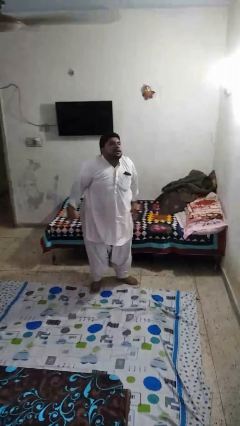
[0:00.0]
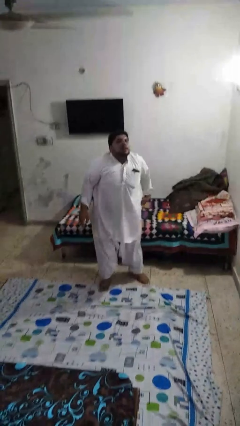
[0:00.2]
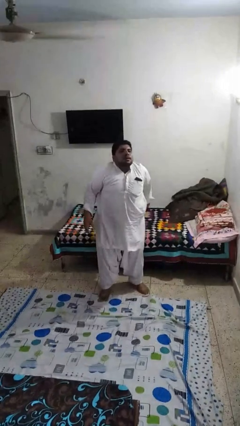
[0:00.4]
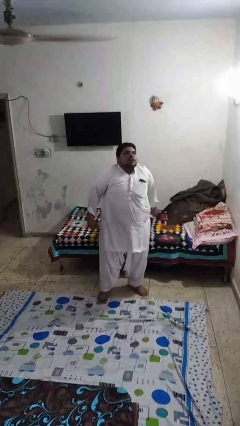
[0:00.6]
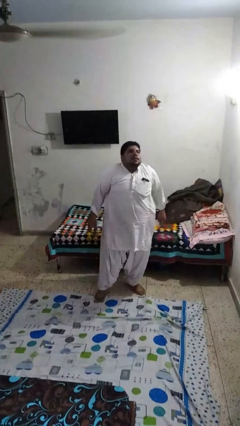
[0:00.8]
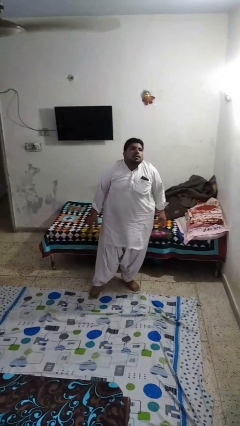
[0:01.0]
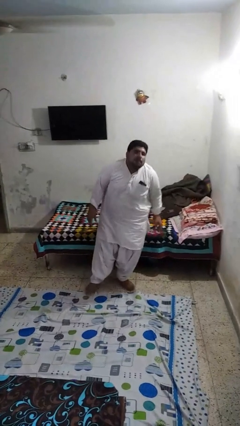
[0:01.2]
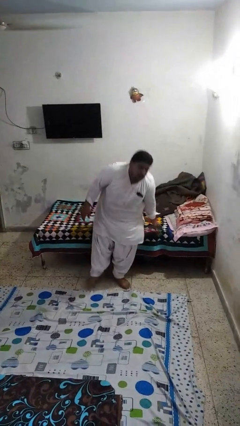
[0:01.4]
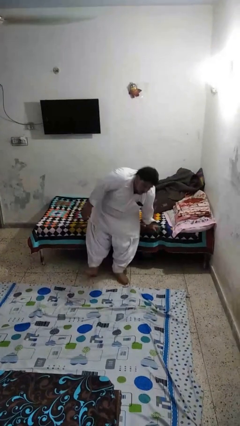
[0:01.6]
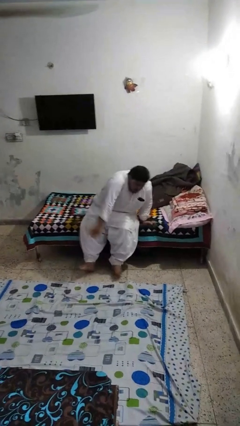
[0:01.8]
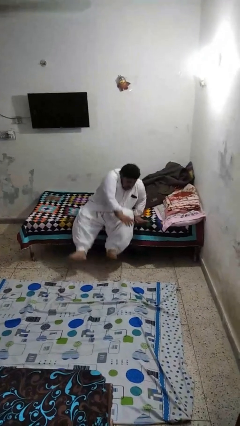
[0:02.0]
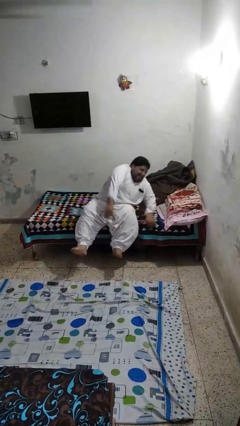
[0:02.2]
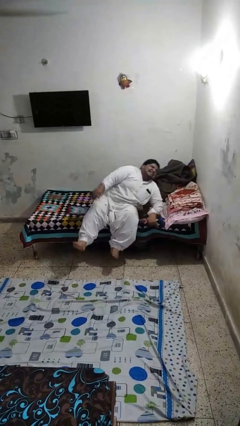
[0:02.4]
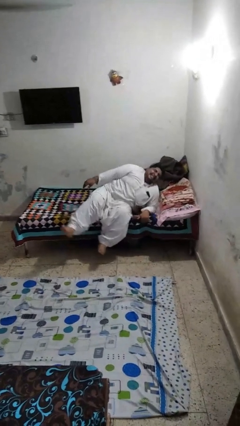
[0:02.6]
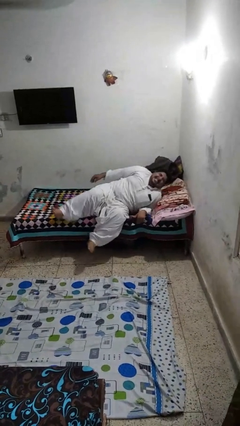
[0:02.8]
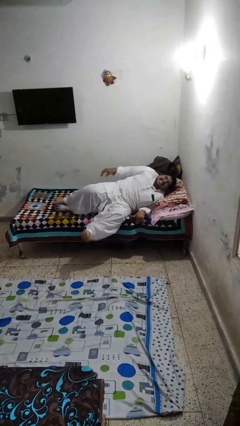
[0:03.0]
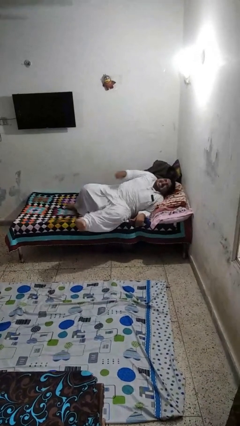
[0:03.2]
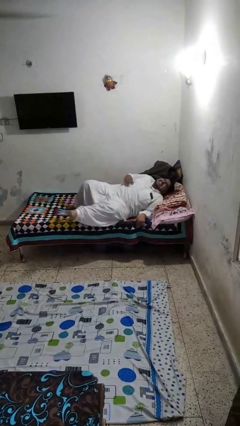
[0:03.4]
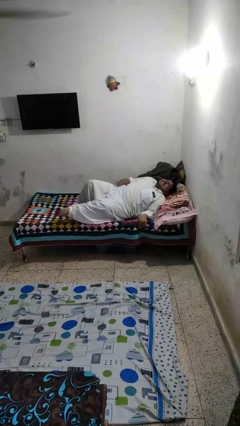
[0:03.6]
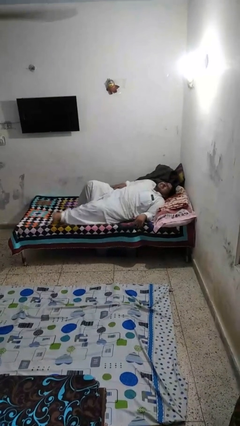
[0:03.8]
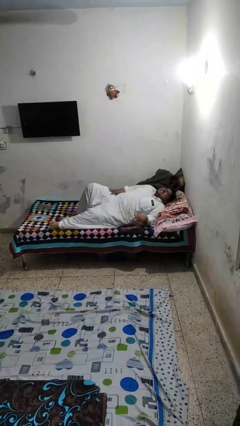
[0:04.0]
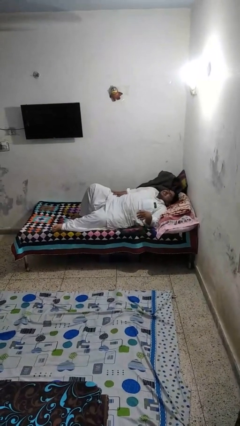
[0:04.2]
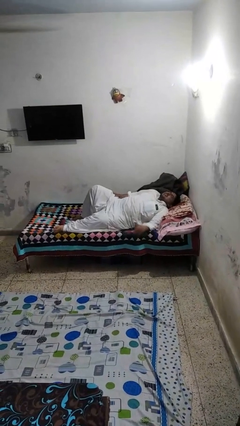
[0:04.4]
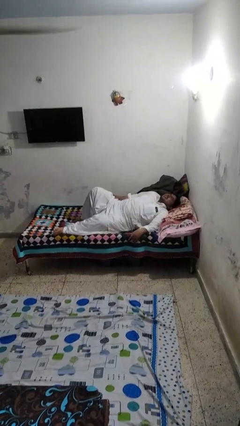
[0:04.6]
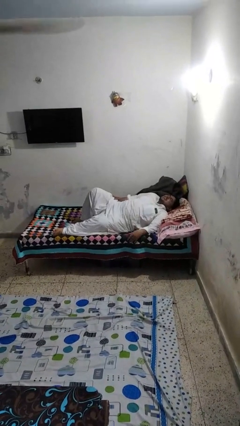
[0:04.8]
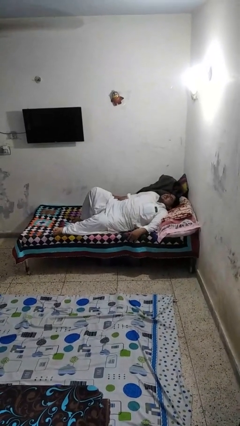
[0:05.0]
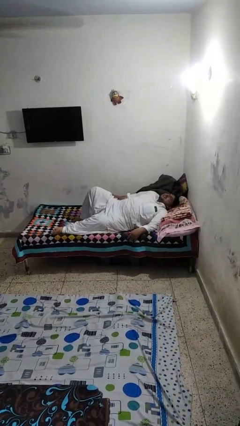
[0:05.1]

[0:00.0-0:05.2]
person lies down on bed

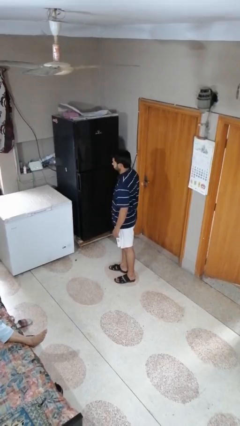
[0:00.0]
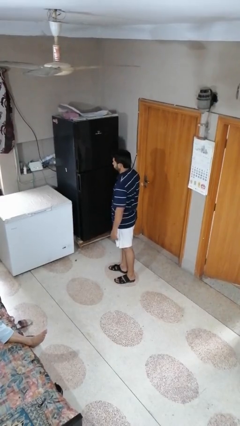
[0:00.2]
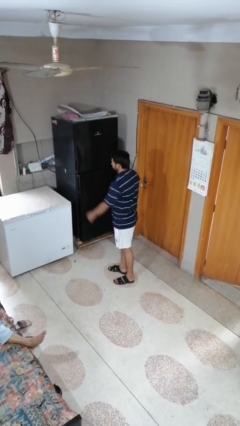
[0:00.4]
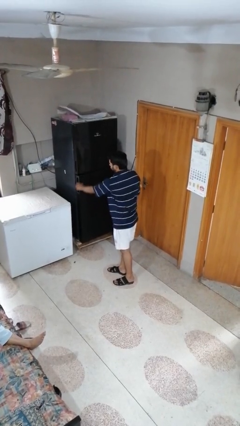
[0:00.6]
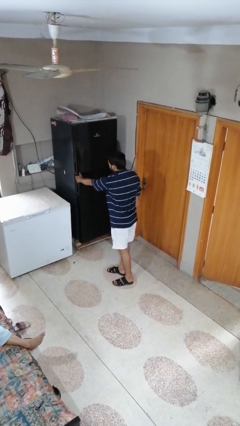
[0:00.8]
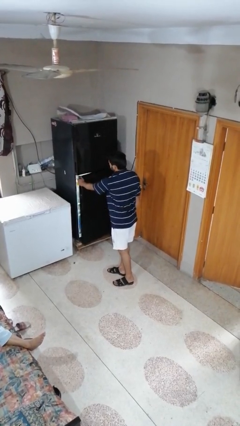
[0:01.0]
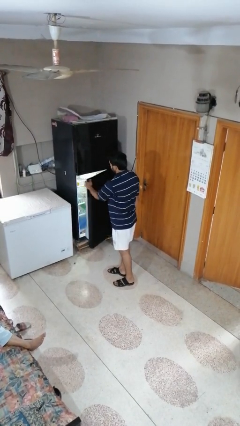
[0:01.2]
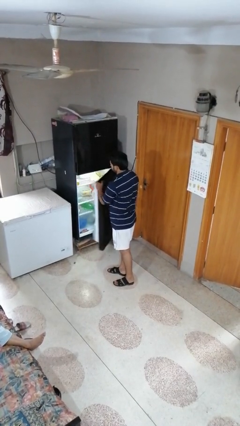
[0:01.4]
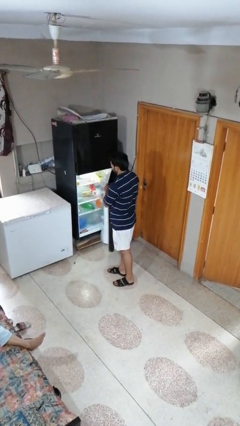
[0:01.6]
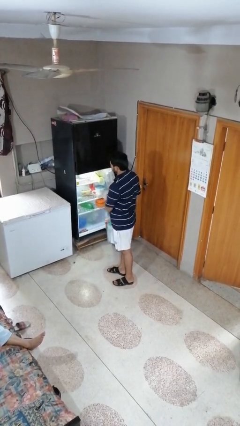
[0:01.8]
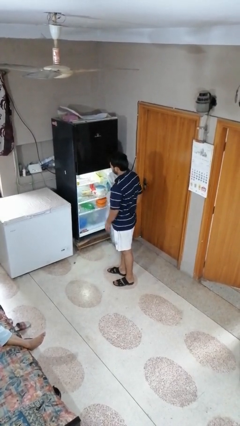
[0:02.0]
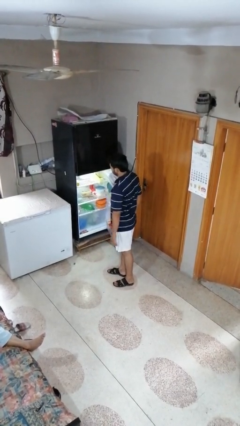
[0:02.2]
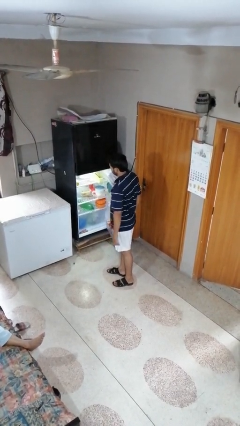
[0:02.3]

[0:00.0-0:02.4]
person opens refrigerator

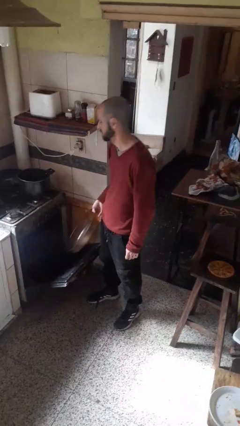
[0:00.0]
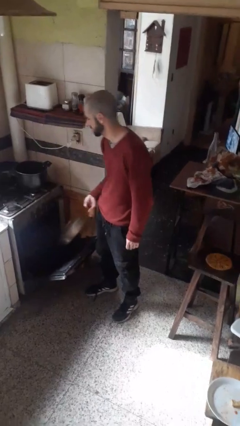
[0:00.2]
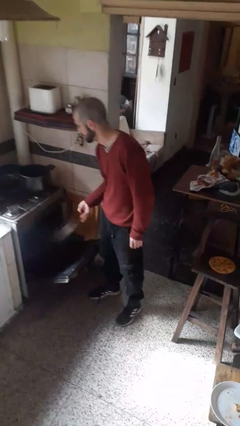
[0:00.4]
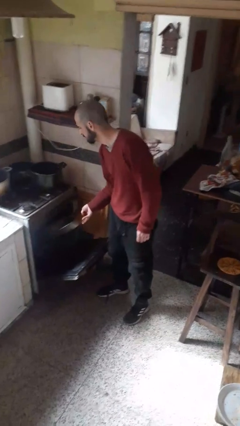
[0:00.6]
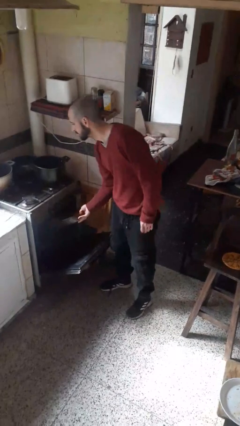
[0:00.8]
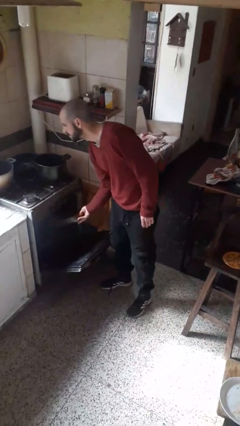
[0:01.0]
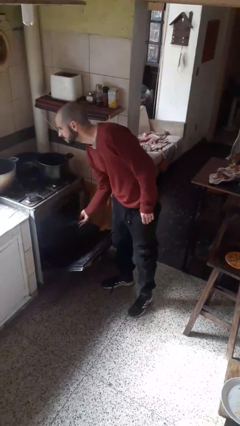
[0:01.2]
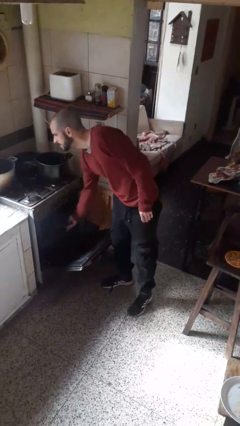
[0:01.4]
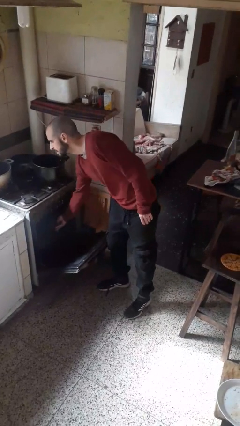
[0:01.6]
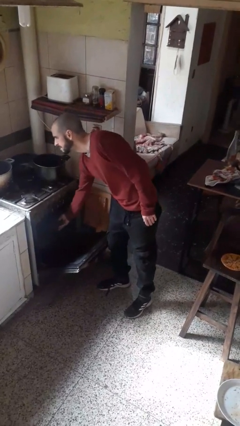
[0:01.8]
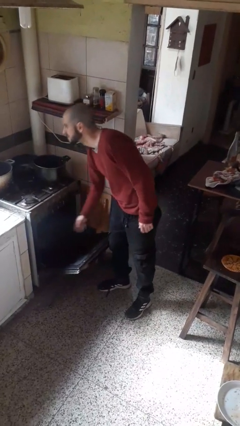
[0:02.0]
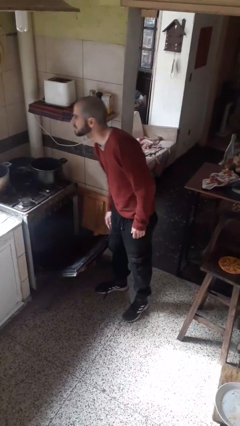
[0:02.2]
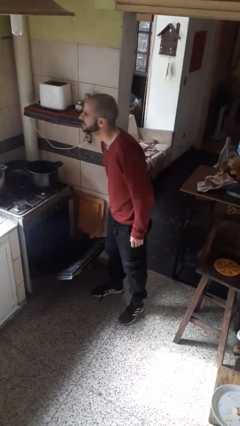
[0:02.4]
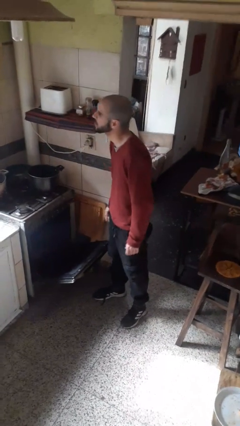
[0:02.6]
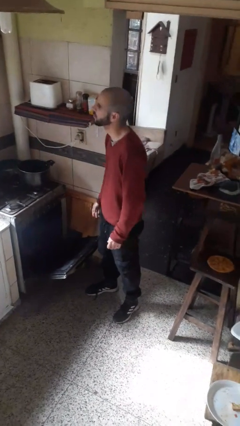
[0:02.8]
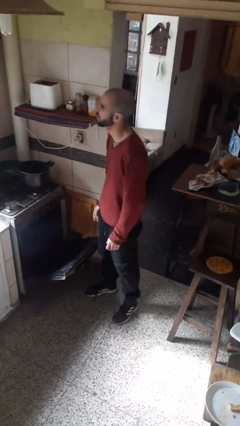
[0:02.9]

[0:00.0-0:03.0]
person puts object into oven

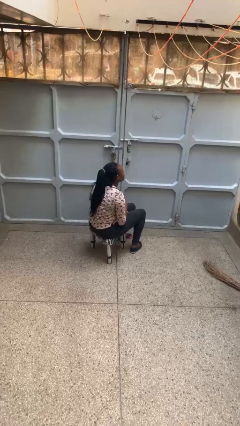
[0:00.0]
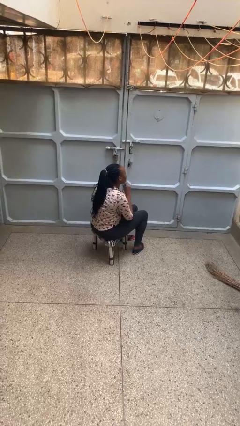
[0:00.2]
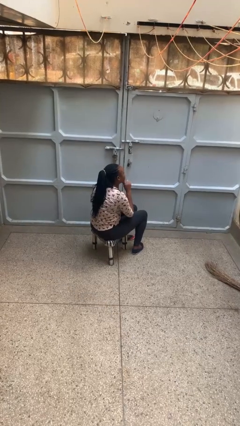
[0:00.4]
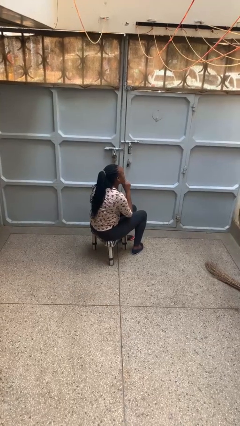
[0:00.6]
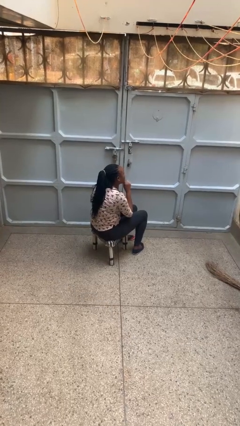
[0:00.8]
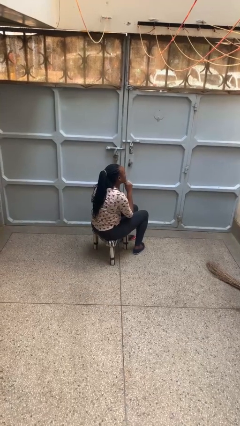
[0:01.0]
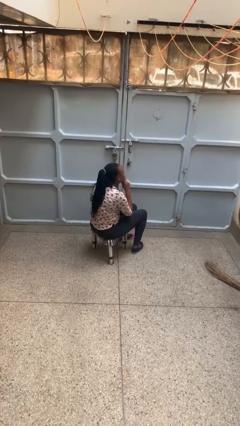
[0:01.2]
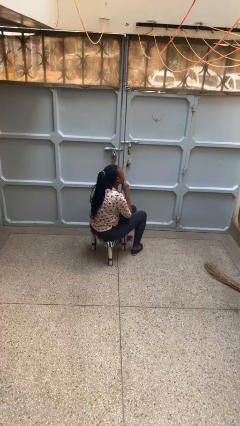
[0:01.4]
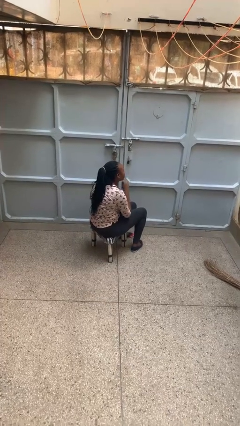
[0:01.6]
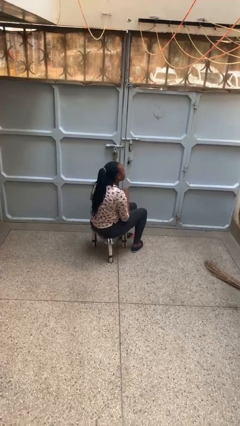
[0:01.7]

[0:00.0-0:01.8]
person strokes chin

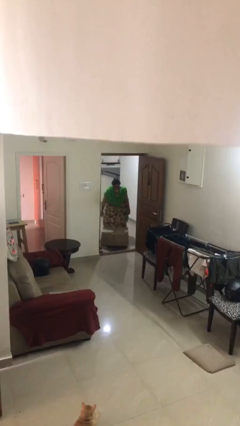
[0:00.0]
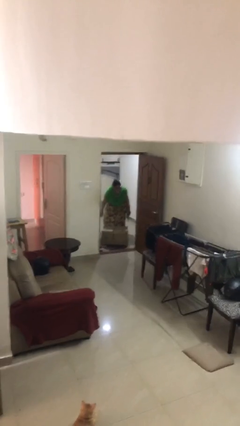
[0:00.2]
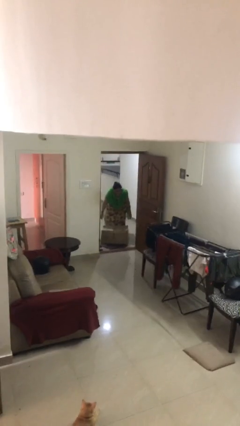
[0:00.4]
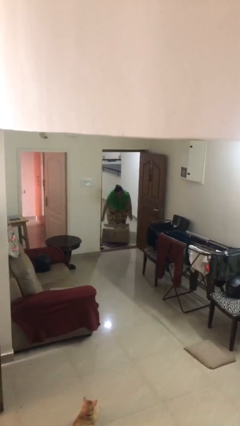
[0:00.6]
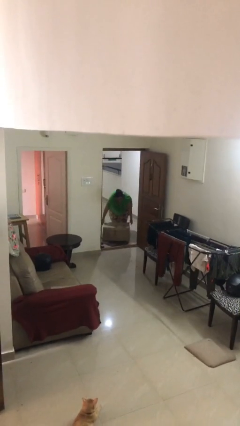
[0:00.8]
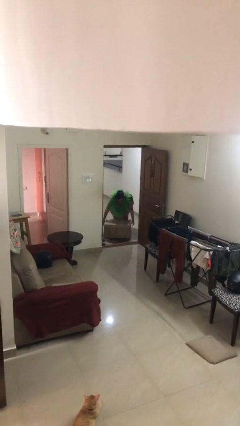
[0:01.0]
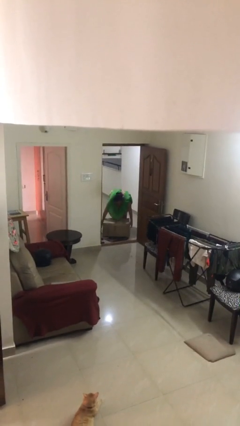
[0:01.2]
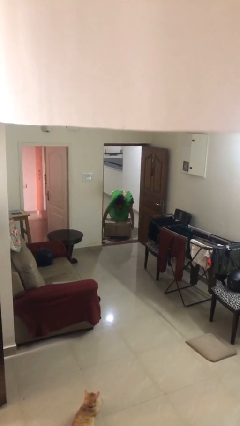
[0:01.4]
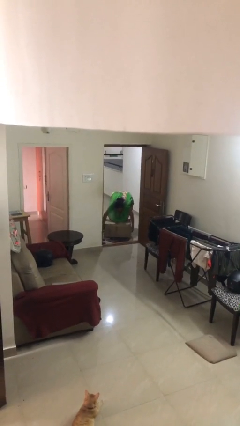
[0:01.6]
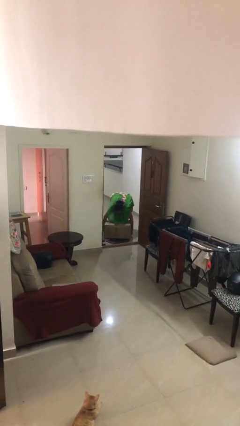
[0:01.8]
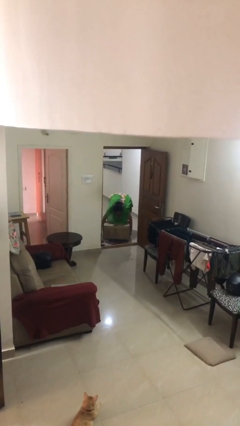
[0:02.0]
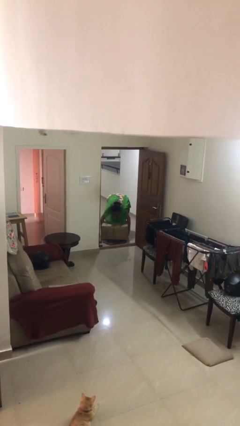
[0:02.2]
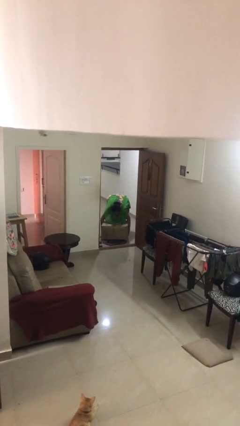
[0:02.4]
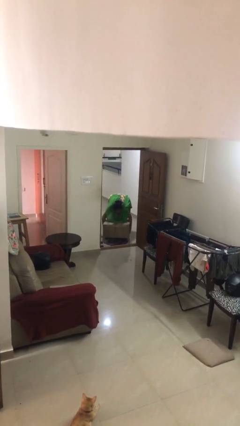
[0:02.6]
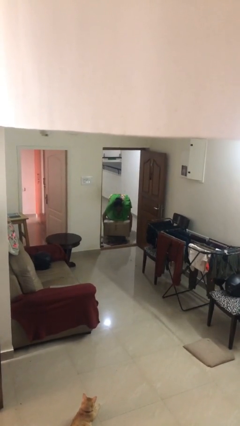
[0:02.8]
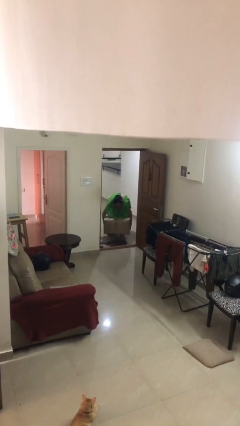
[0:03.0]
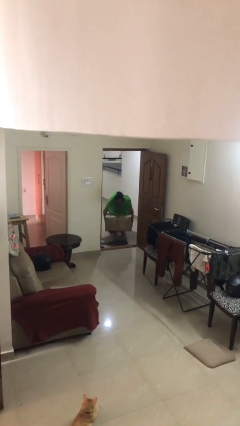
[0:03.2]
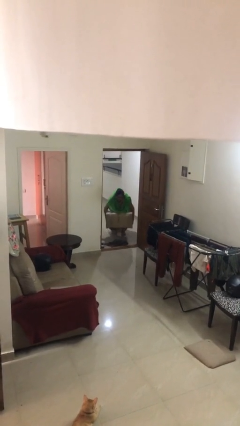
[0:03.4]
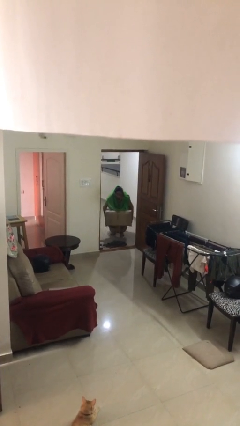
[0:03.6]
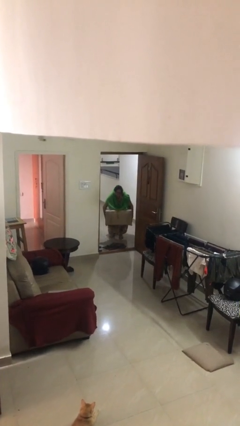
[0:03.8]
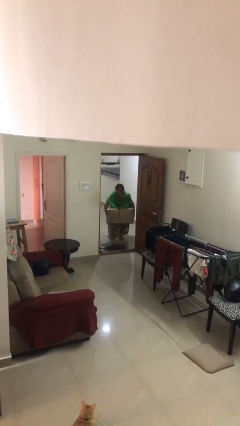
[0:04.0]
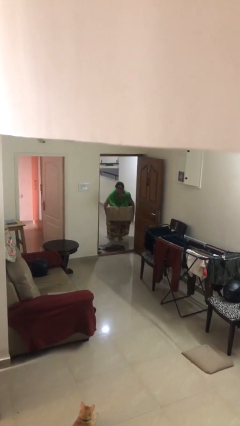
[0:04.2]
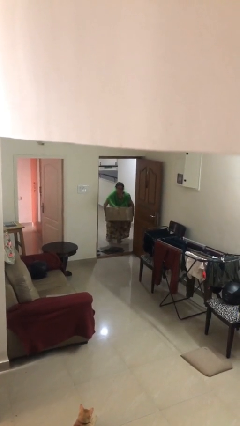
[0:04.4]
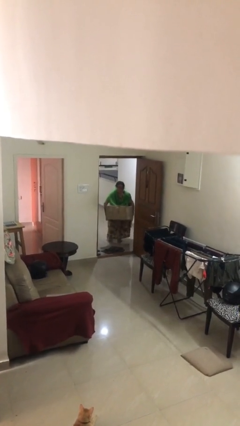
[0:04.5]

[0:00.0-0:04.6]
person picks up object from floor

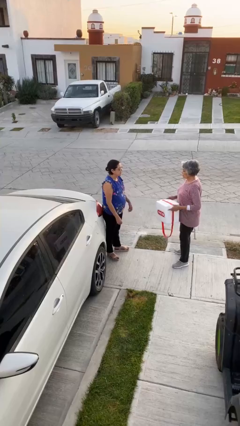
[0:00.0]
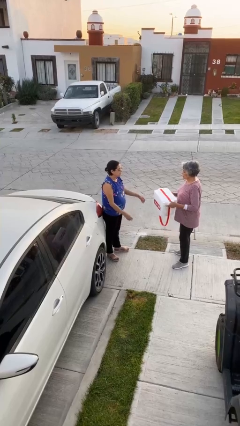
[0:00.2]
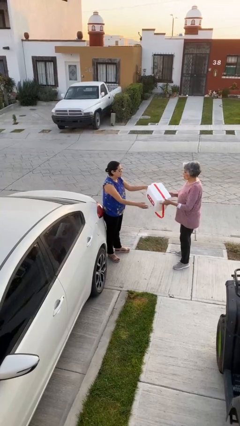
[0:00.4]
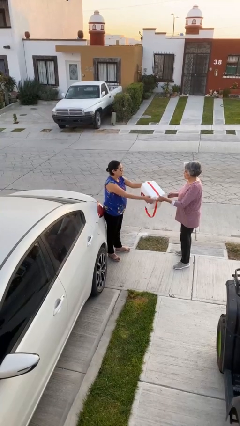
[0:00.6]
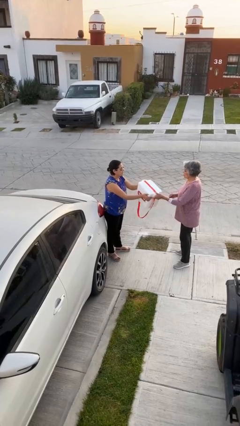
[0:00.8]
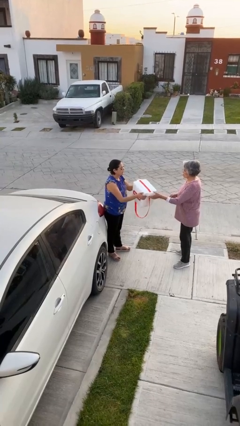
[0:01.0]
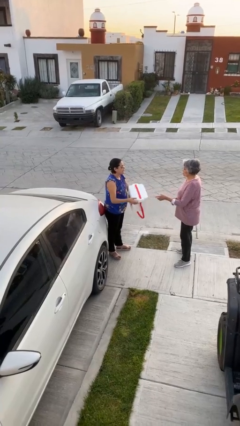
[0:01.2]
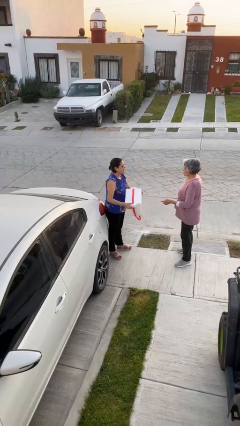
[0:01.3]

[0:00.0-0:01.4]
person transfers object to person
